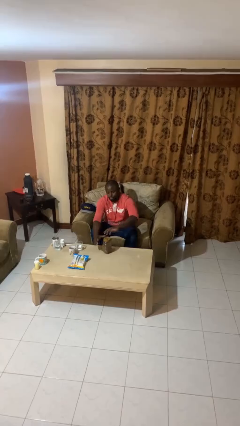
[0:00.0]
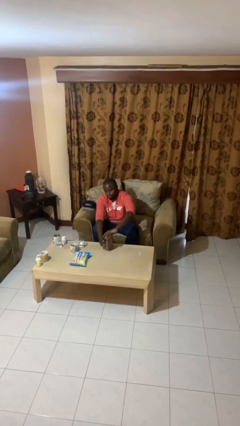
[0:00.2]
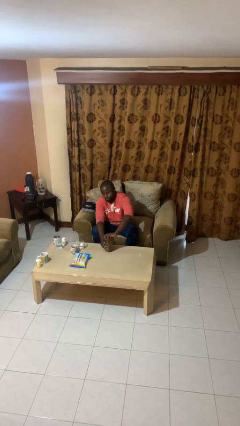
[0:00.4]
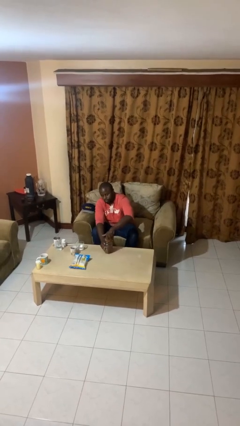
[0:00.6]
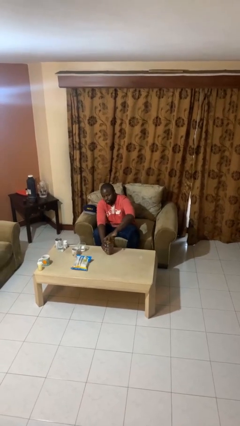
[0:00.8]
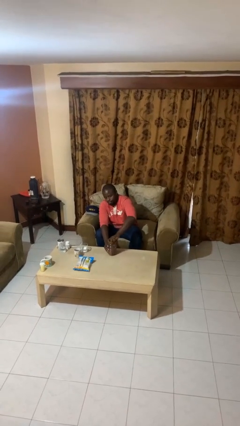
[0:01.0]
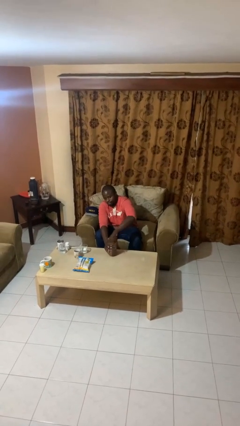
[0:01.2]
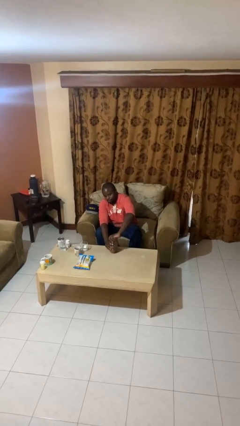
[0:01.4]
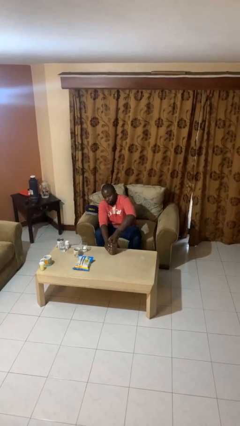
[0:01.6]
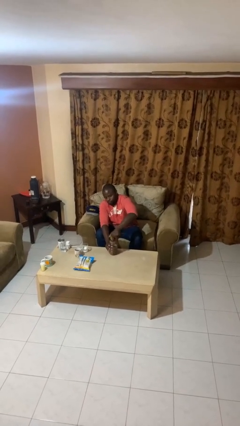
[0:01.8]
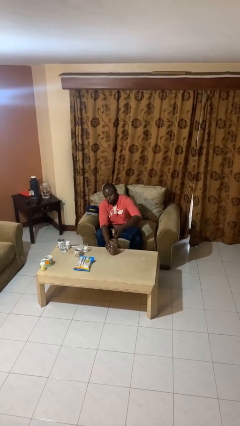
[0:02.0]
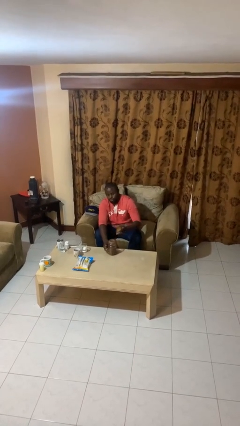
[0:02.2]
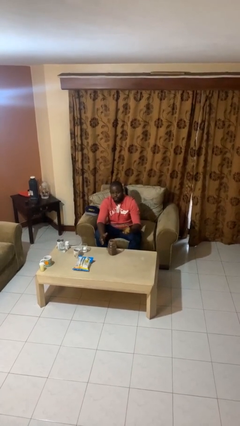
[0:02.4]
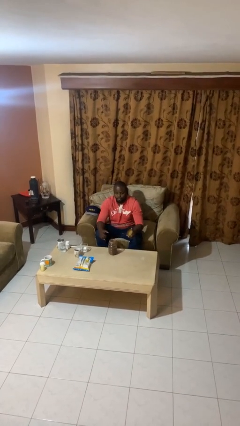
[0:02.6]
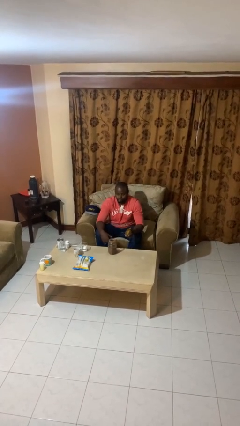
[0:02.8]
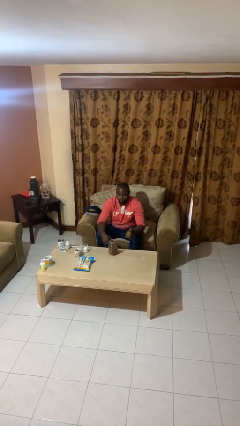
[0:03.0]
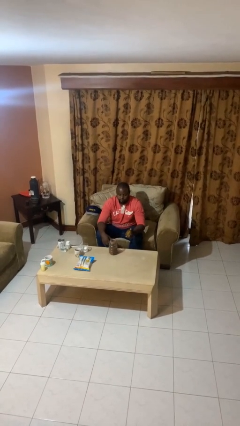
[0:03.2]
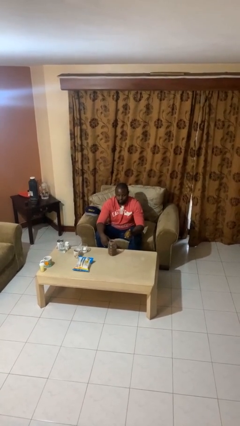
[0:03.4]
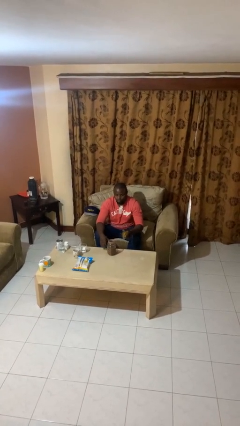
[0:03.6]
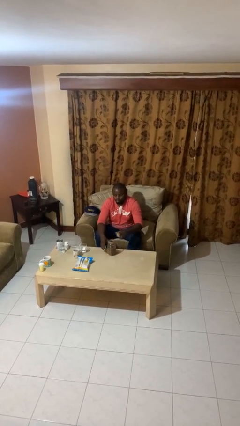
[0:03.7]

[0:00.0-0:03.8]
person opens jar

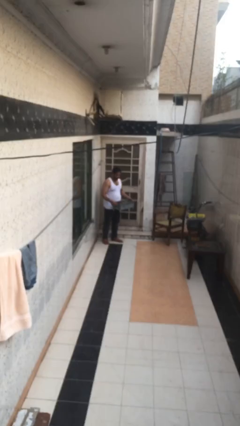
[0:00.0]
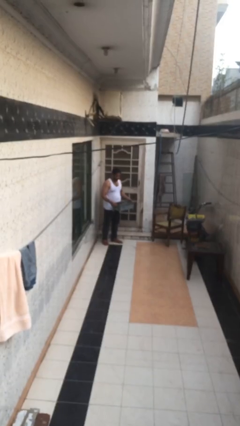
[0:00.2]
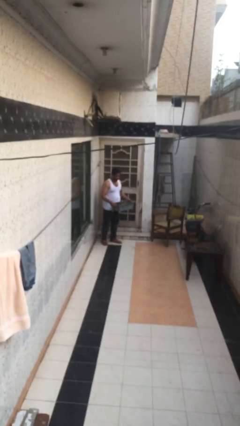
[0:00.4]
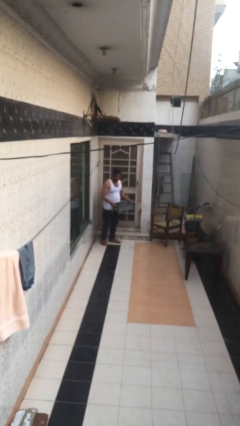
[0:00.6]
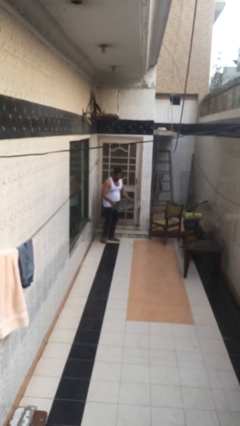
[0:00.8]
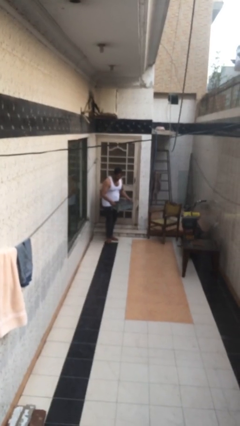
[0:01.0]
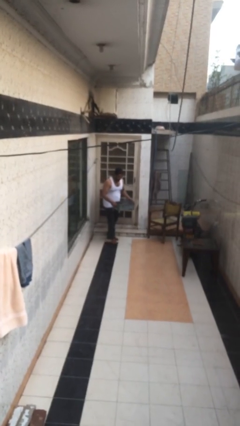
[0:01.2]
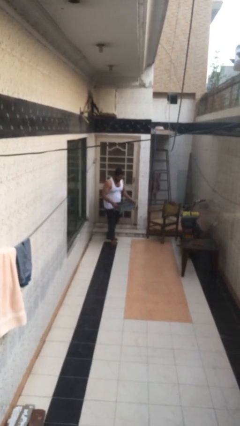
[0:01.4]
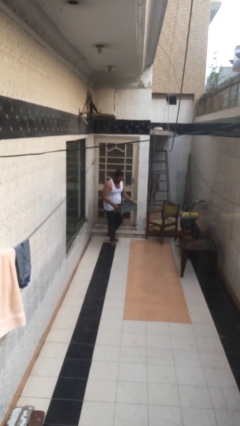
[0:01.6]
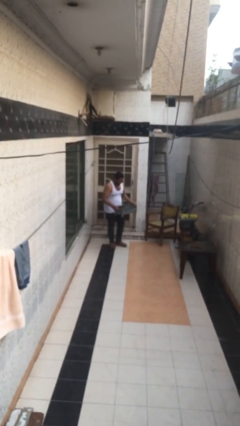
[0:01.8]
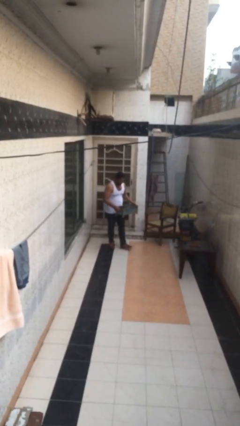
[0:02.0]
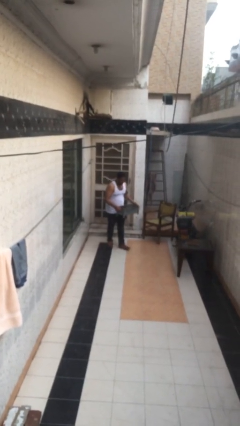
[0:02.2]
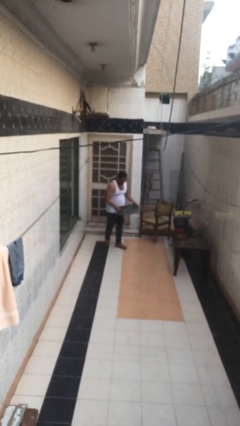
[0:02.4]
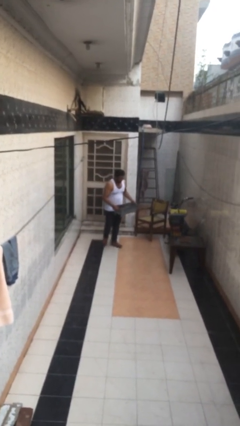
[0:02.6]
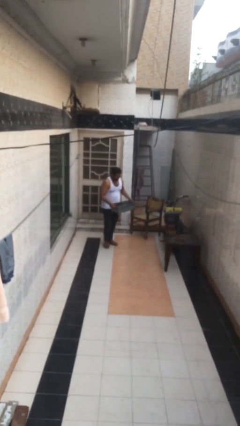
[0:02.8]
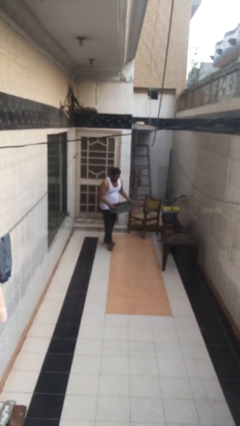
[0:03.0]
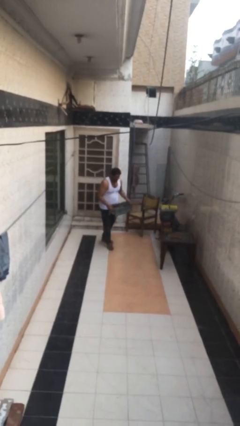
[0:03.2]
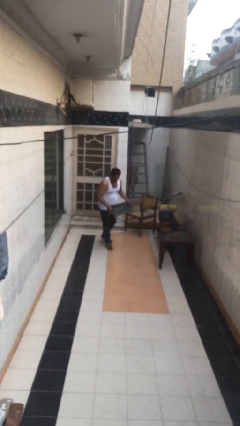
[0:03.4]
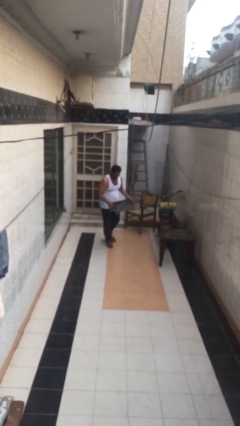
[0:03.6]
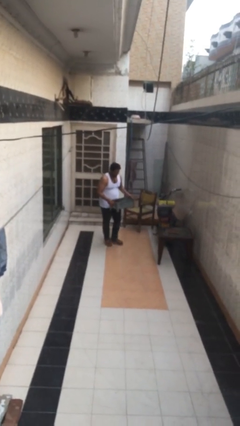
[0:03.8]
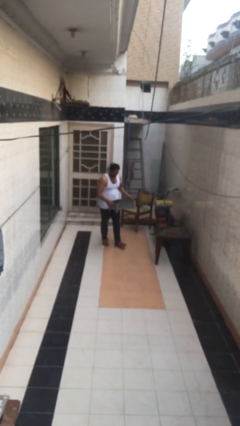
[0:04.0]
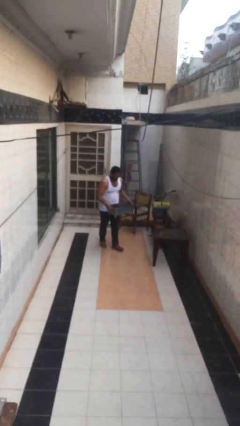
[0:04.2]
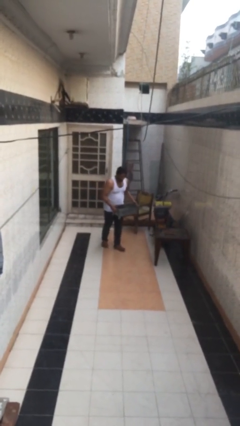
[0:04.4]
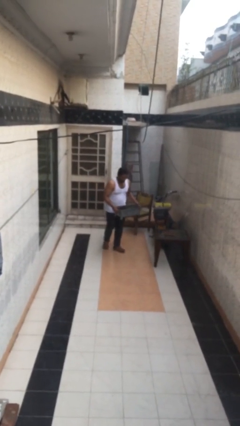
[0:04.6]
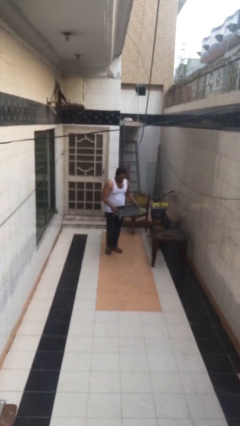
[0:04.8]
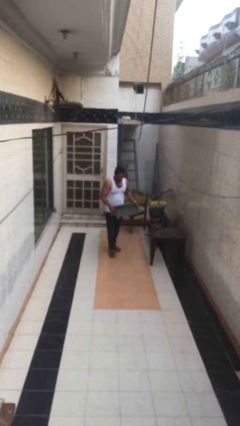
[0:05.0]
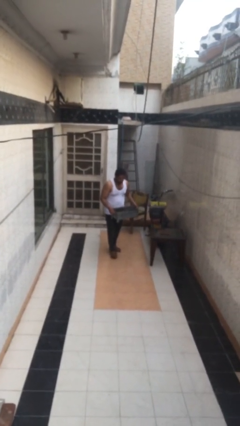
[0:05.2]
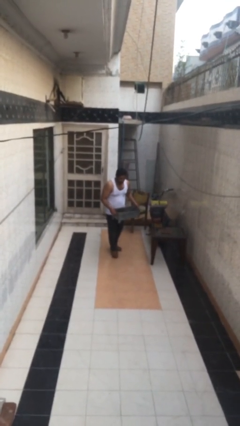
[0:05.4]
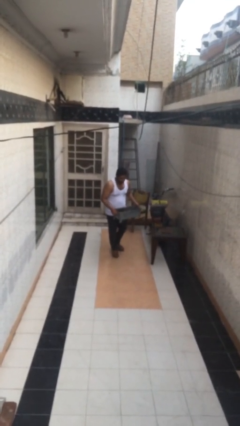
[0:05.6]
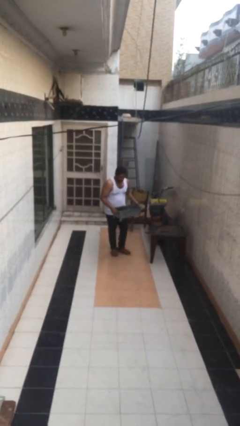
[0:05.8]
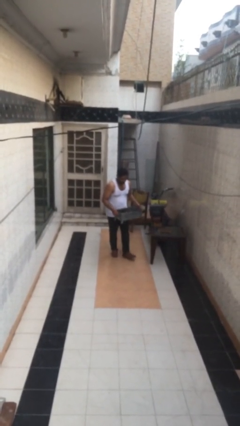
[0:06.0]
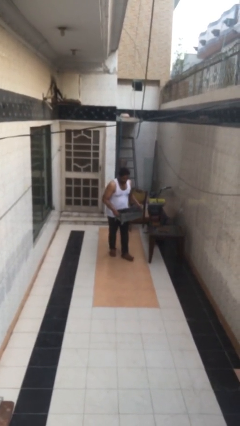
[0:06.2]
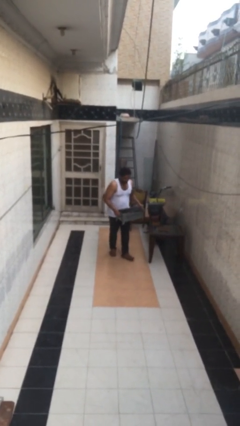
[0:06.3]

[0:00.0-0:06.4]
person carries heavy object

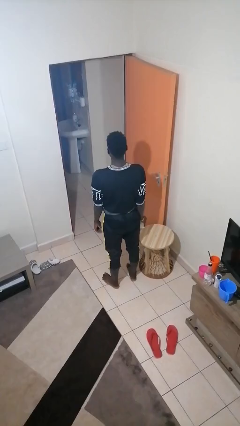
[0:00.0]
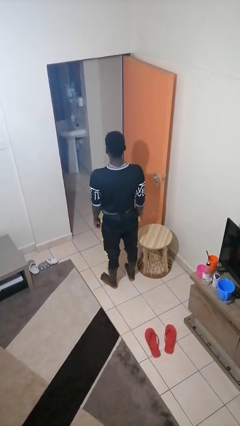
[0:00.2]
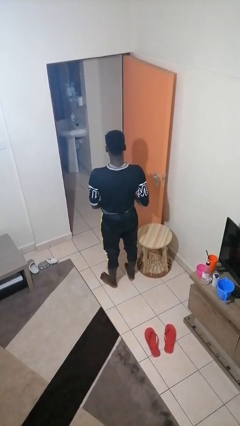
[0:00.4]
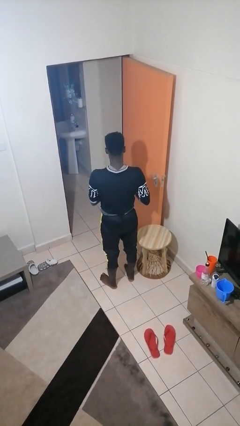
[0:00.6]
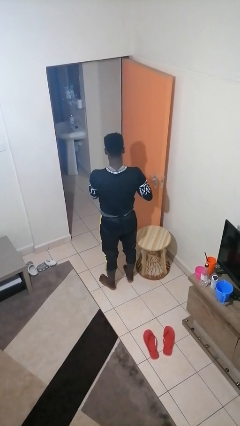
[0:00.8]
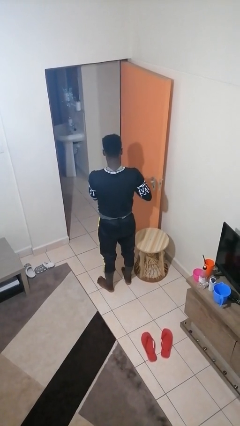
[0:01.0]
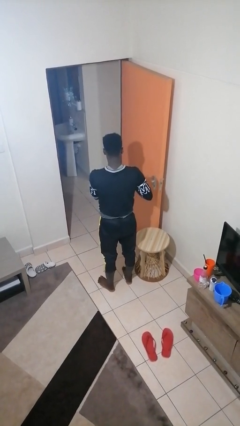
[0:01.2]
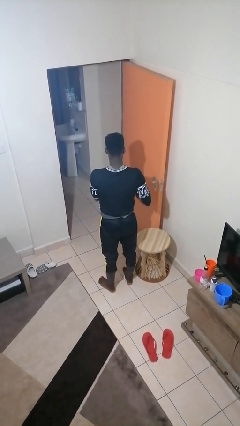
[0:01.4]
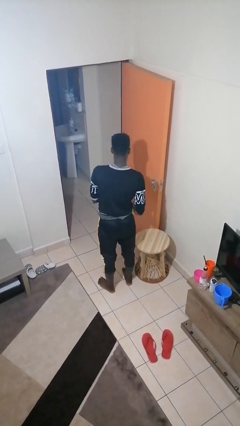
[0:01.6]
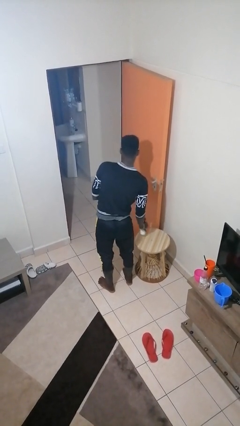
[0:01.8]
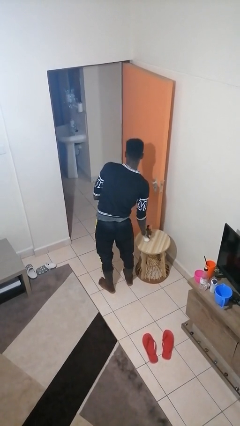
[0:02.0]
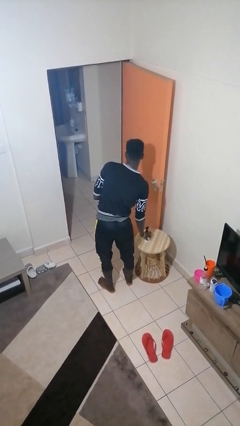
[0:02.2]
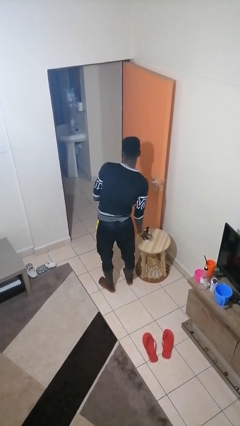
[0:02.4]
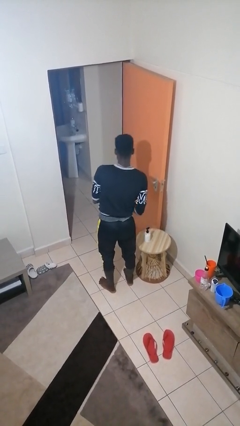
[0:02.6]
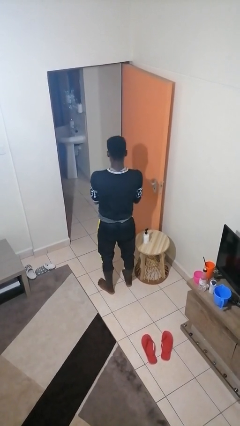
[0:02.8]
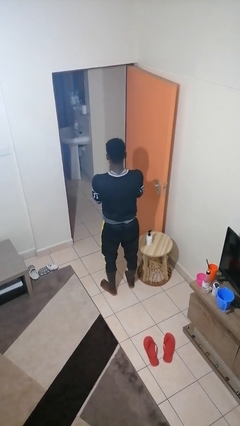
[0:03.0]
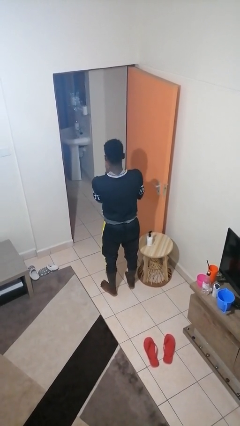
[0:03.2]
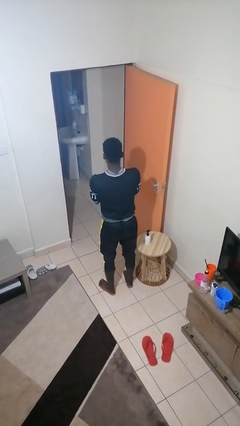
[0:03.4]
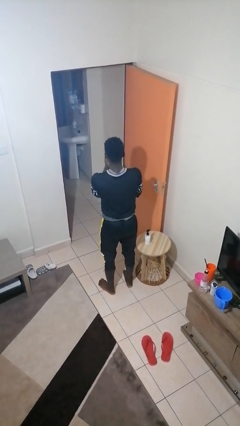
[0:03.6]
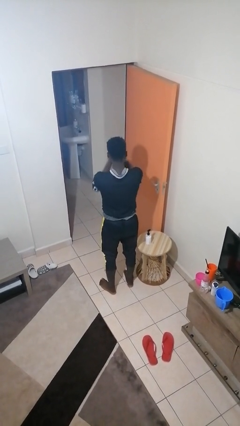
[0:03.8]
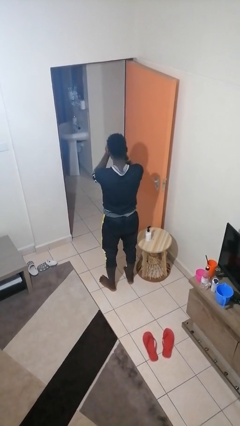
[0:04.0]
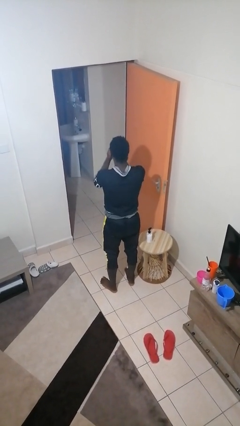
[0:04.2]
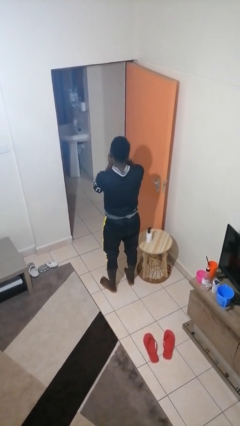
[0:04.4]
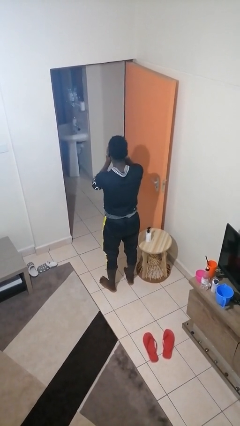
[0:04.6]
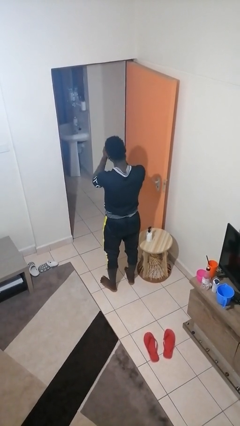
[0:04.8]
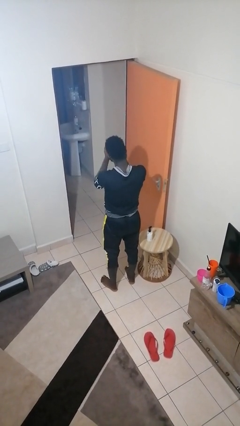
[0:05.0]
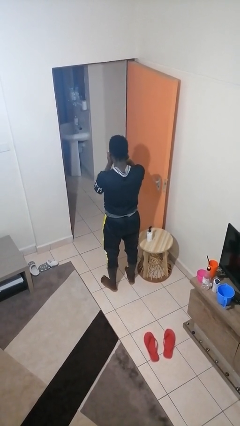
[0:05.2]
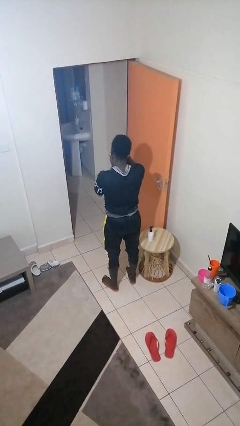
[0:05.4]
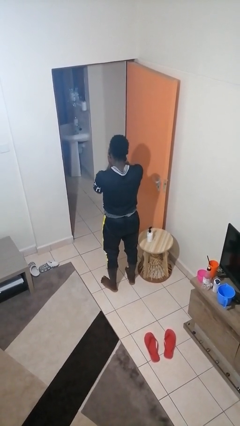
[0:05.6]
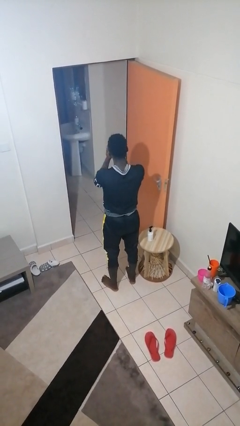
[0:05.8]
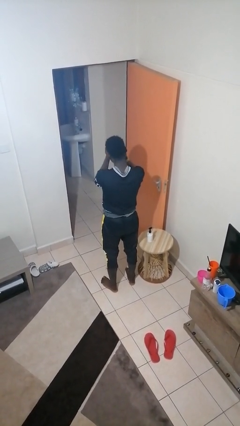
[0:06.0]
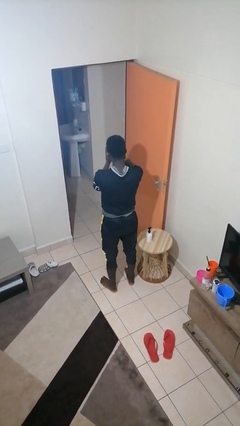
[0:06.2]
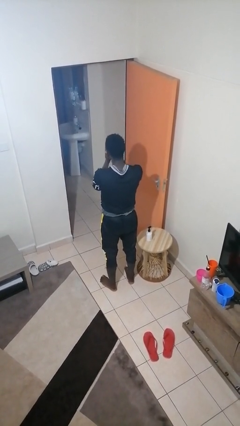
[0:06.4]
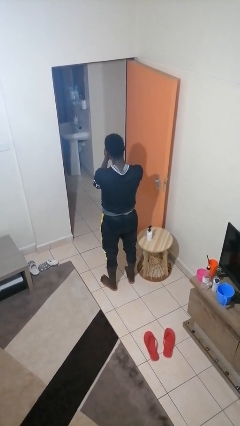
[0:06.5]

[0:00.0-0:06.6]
person applies sunscreen

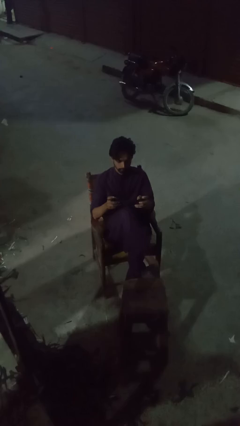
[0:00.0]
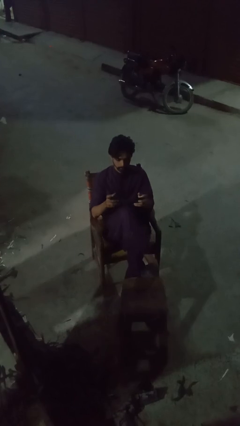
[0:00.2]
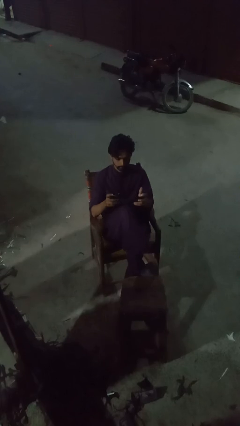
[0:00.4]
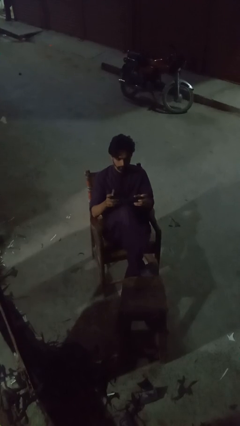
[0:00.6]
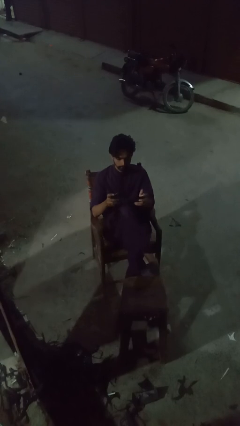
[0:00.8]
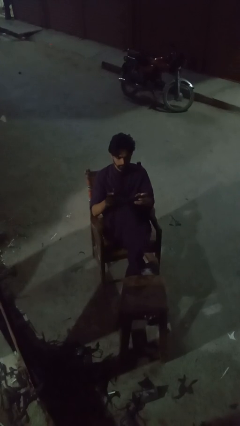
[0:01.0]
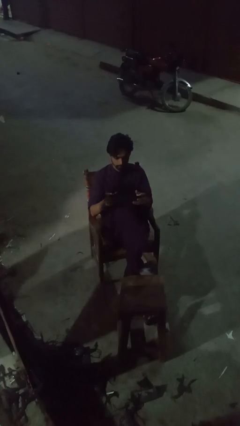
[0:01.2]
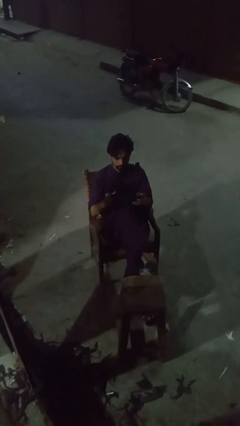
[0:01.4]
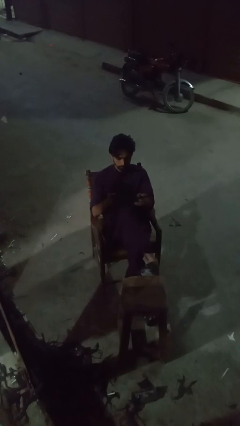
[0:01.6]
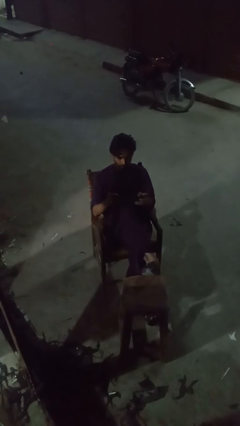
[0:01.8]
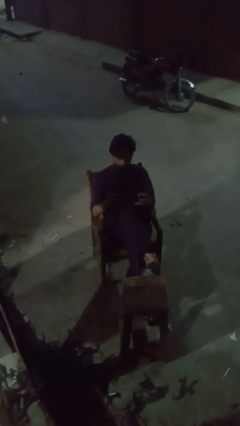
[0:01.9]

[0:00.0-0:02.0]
person interacts with handheld game
